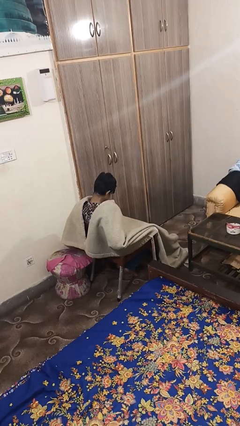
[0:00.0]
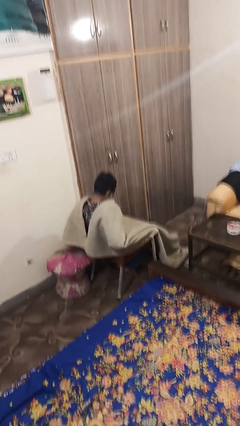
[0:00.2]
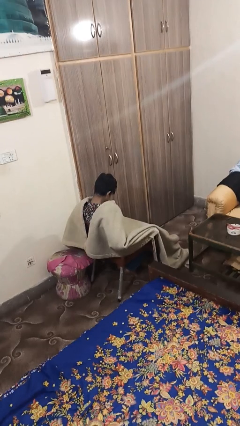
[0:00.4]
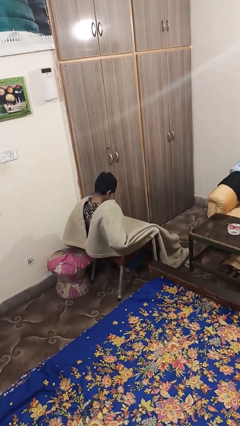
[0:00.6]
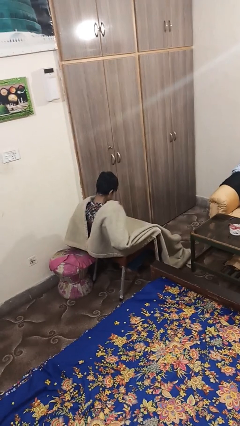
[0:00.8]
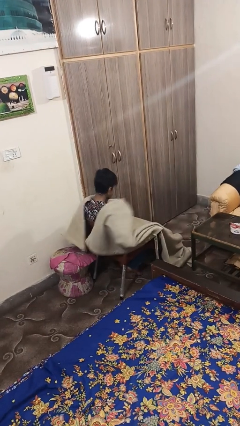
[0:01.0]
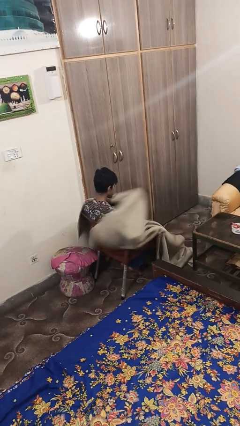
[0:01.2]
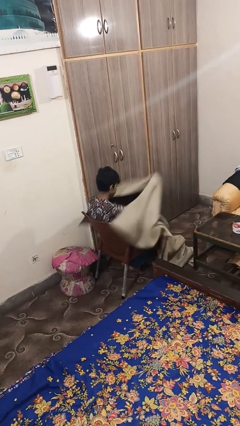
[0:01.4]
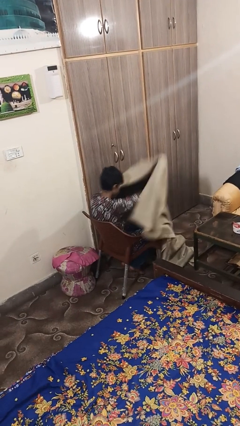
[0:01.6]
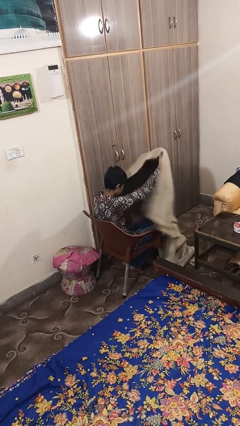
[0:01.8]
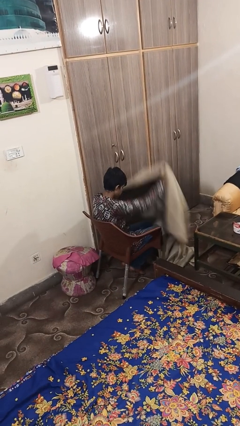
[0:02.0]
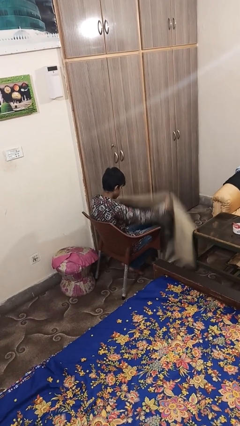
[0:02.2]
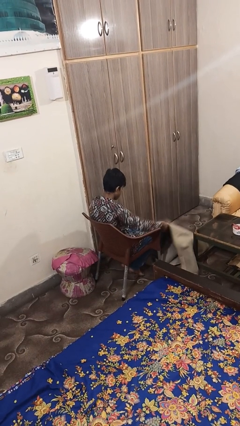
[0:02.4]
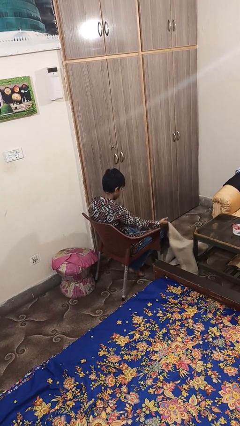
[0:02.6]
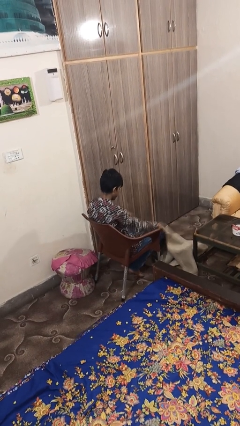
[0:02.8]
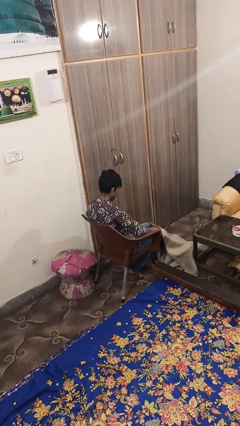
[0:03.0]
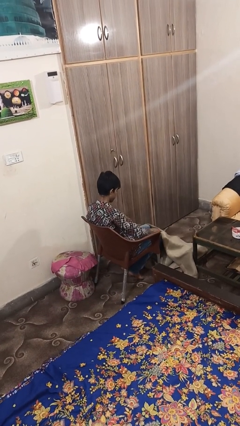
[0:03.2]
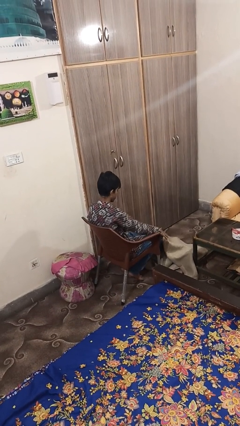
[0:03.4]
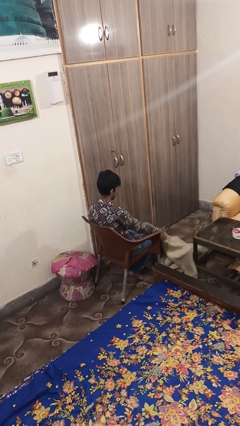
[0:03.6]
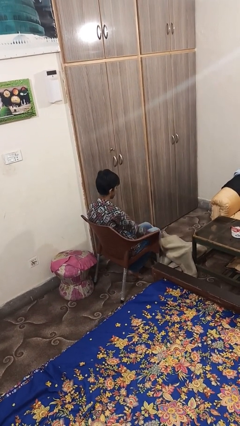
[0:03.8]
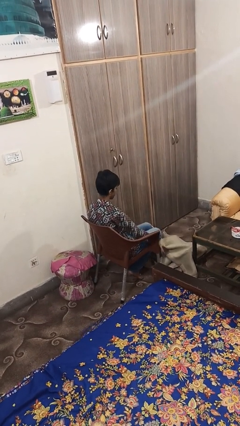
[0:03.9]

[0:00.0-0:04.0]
person uncovers with blanket

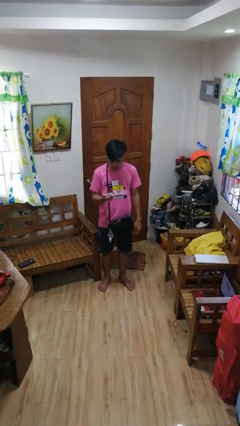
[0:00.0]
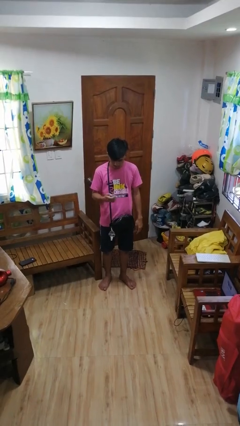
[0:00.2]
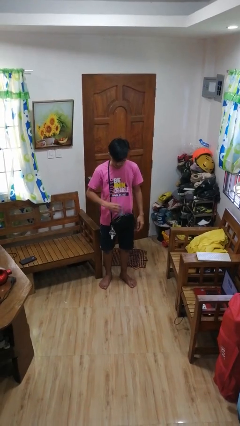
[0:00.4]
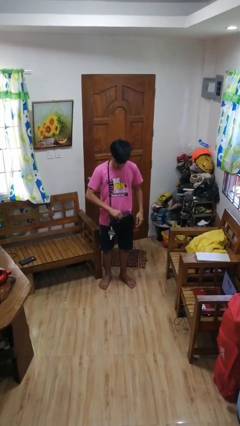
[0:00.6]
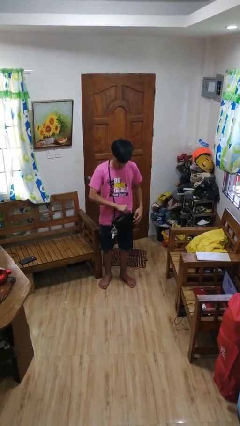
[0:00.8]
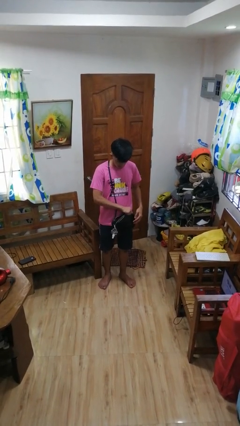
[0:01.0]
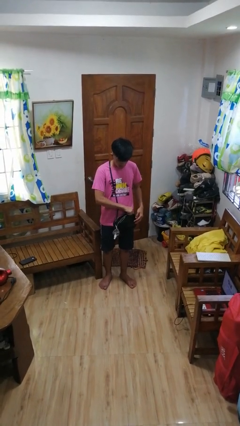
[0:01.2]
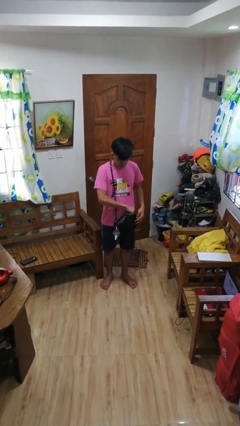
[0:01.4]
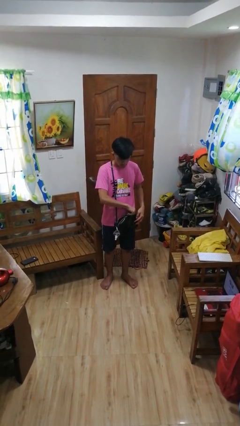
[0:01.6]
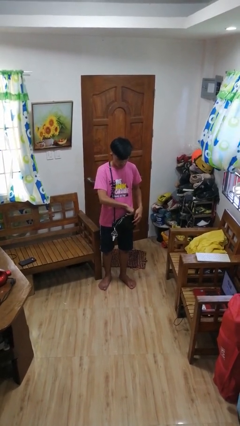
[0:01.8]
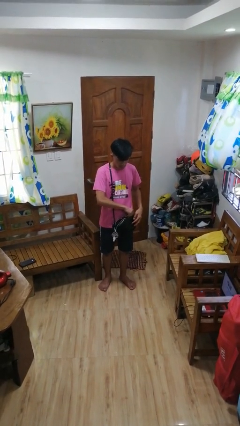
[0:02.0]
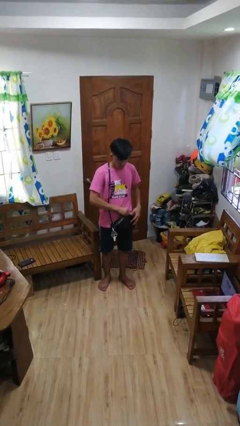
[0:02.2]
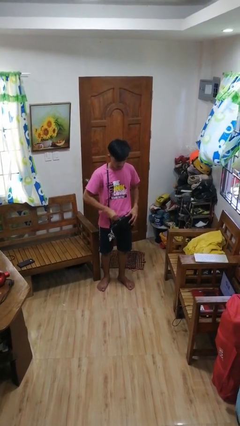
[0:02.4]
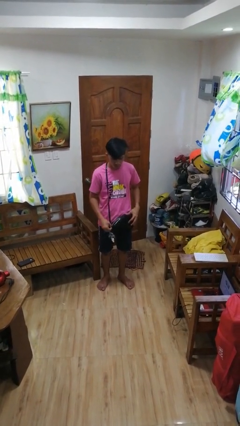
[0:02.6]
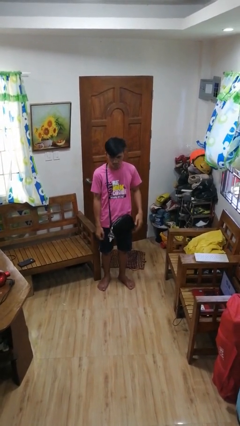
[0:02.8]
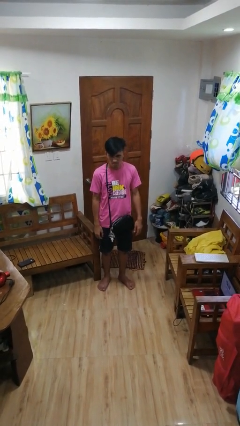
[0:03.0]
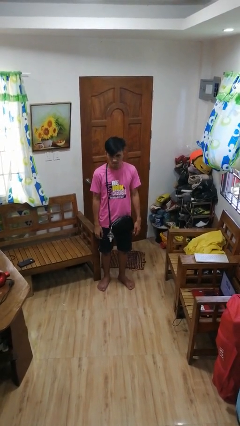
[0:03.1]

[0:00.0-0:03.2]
person puts object into purse

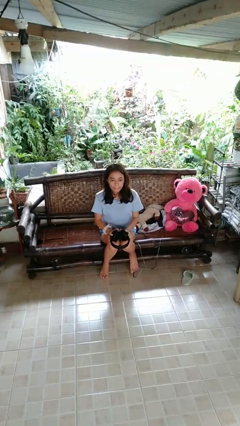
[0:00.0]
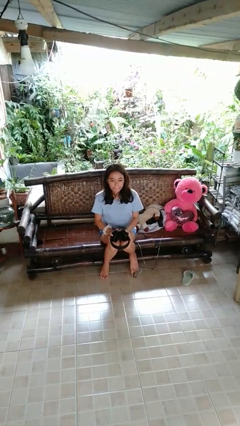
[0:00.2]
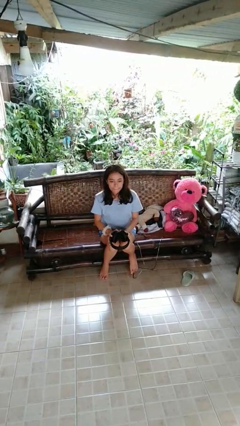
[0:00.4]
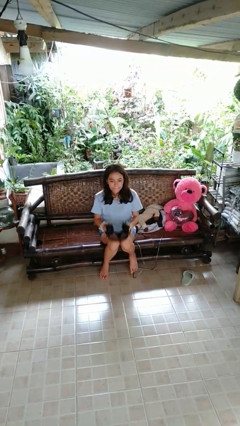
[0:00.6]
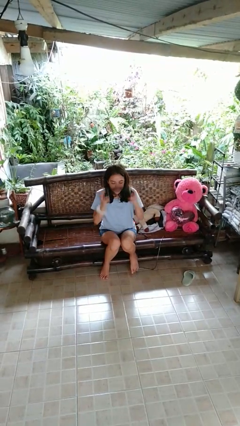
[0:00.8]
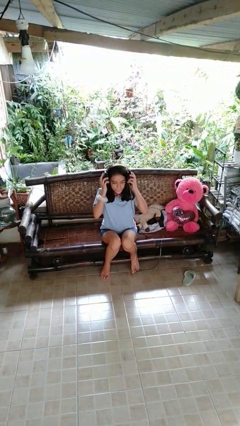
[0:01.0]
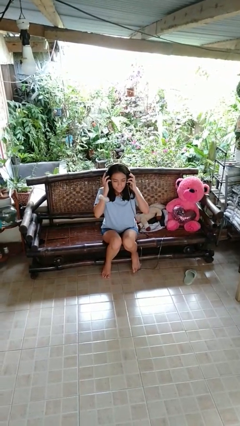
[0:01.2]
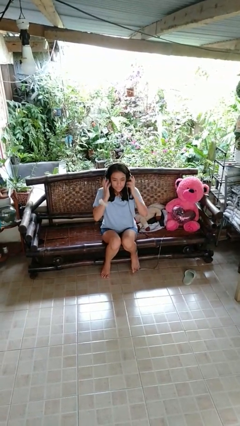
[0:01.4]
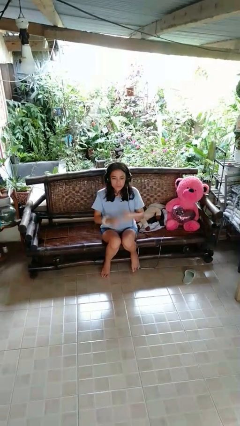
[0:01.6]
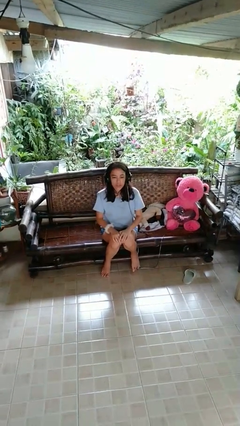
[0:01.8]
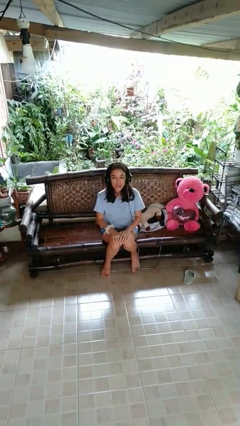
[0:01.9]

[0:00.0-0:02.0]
person puts on headphones

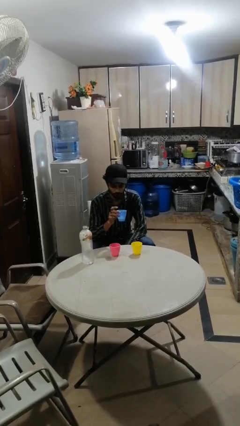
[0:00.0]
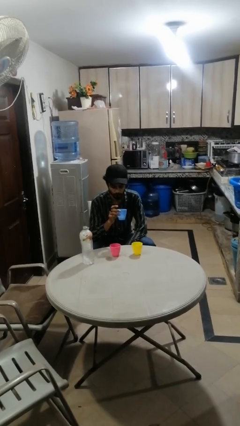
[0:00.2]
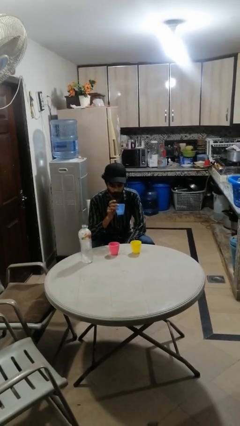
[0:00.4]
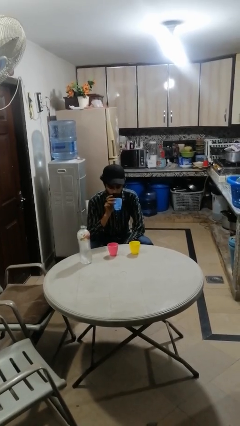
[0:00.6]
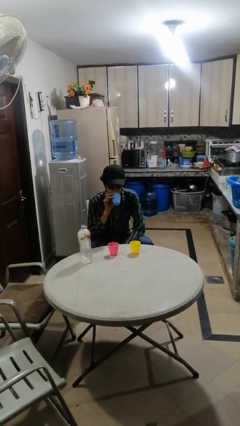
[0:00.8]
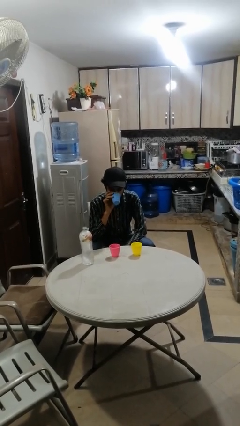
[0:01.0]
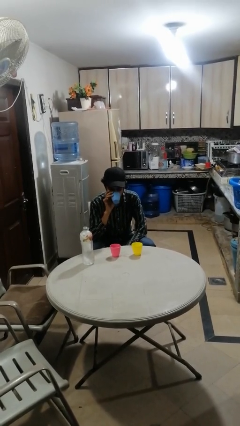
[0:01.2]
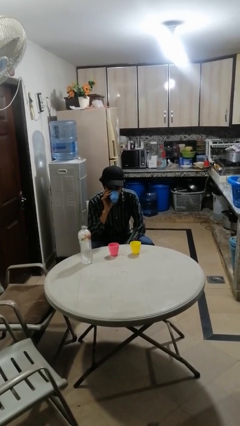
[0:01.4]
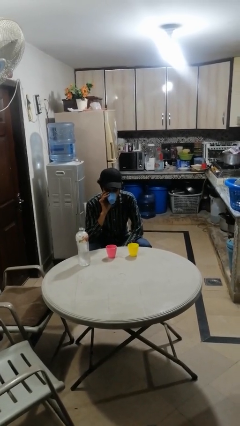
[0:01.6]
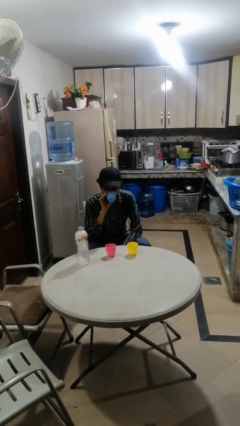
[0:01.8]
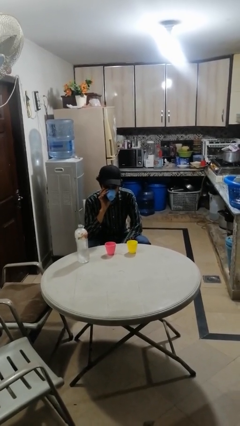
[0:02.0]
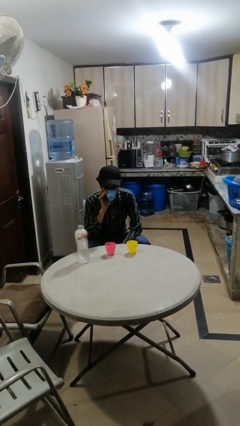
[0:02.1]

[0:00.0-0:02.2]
person drinks from shotglass

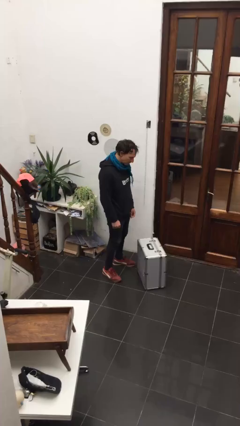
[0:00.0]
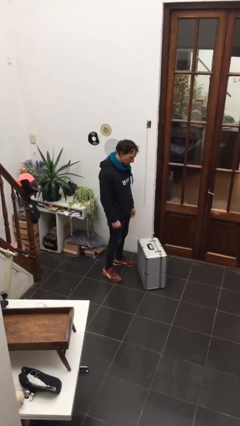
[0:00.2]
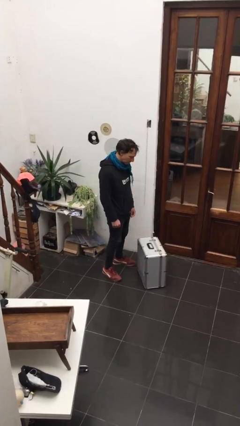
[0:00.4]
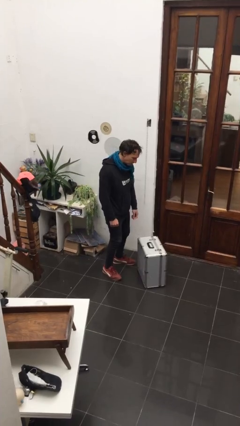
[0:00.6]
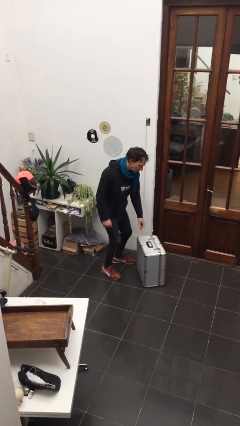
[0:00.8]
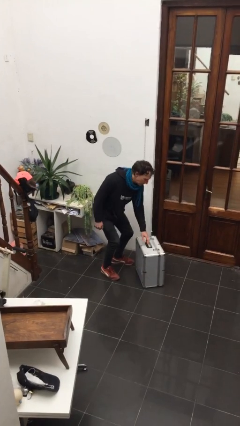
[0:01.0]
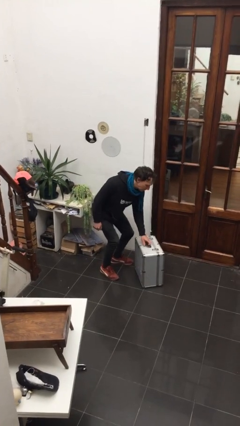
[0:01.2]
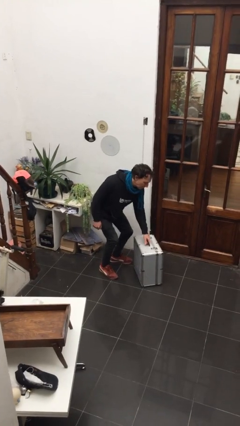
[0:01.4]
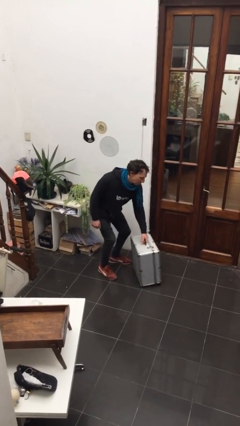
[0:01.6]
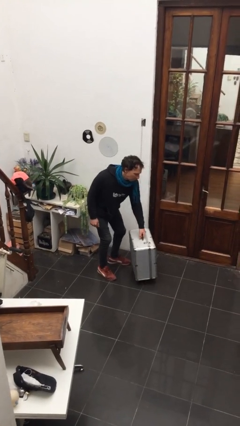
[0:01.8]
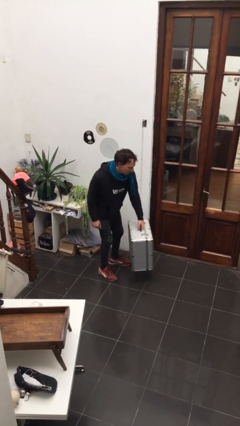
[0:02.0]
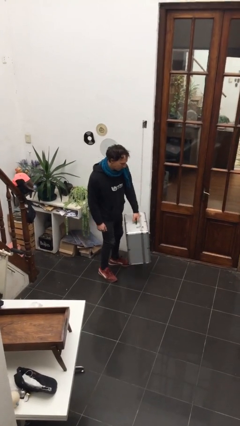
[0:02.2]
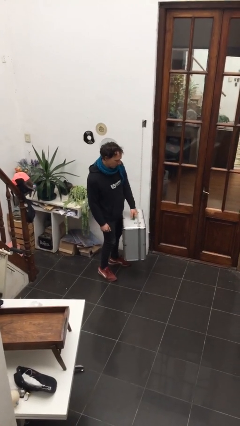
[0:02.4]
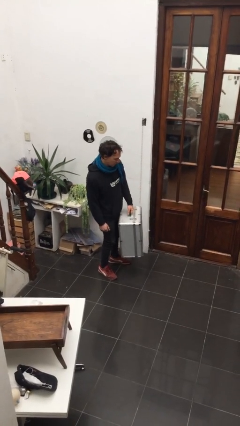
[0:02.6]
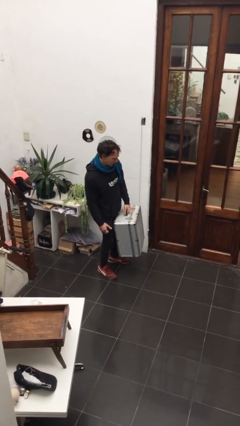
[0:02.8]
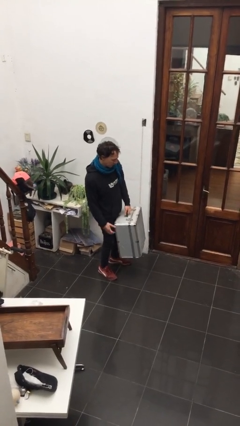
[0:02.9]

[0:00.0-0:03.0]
person picks up object from floor

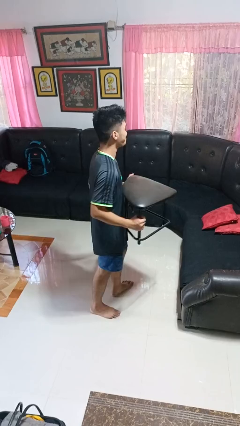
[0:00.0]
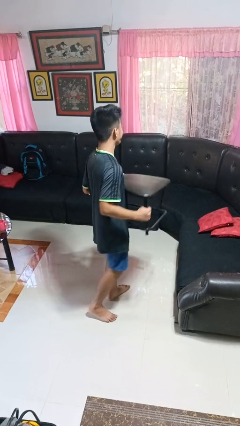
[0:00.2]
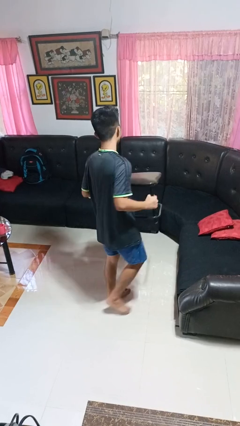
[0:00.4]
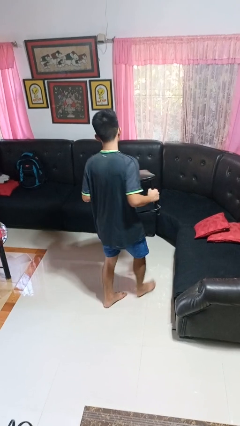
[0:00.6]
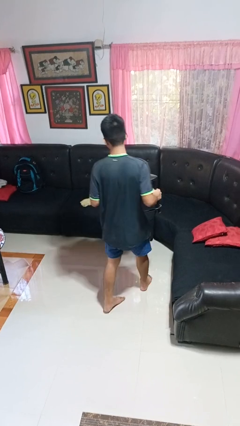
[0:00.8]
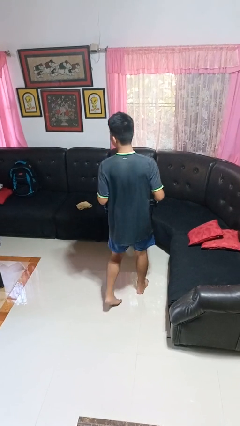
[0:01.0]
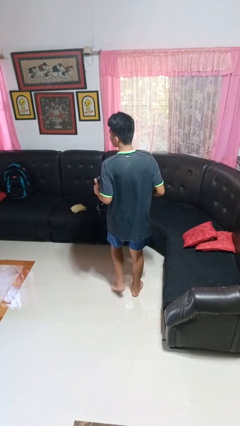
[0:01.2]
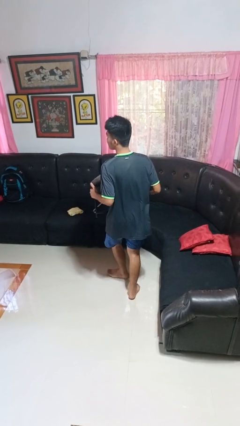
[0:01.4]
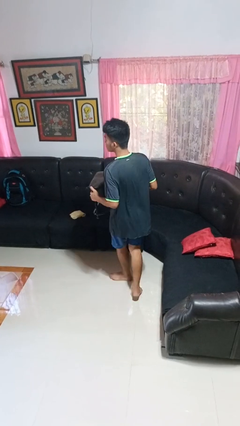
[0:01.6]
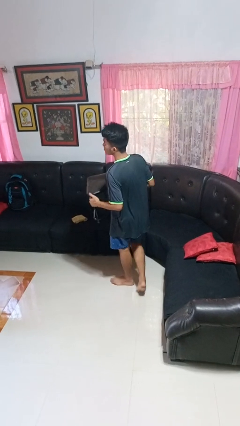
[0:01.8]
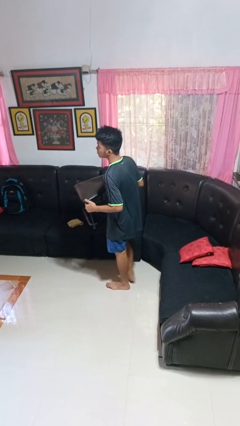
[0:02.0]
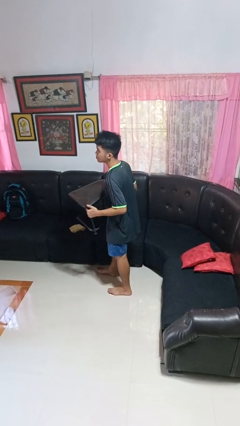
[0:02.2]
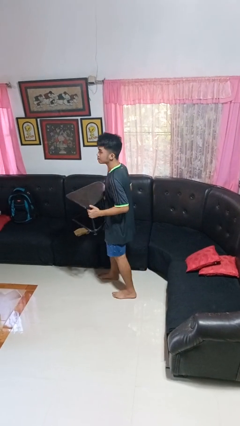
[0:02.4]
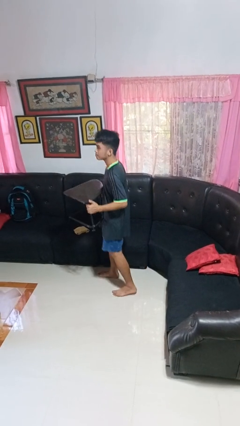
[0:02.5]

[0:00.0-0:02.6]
person carries furniture

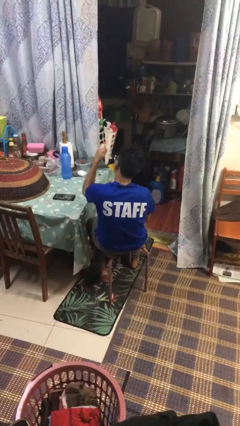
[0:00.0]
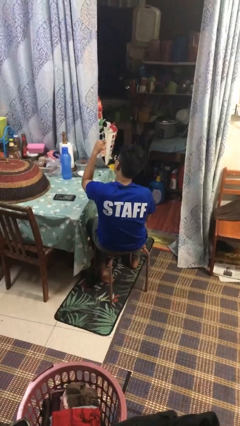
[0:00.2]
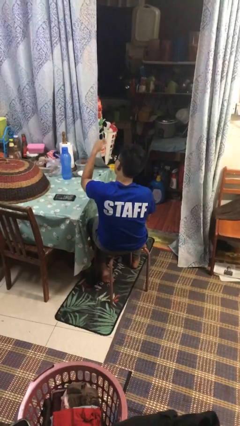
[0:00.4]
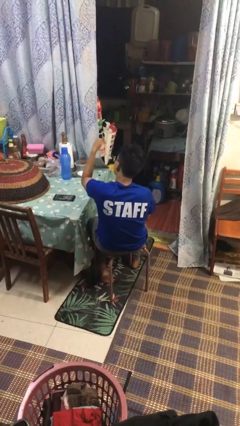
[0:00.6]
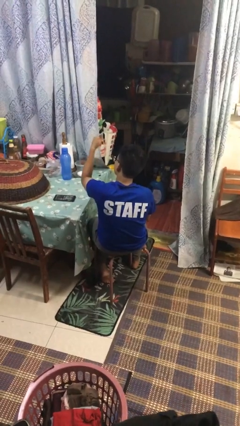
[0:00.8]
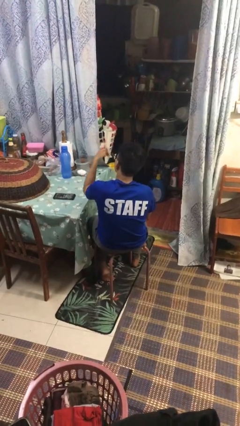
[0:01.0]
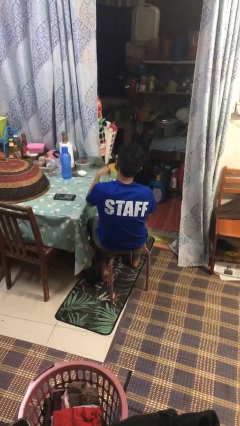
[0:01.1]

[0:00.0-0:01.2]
person gestures thumbs up
